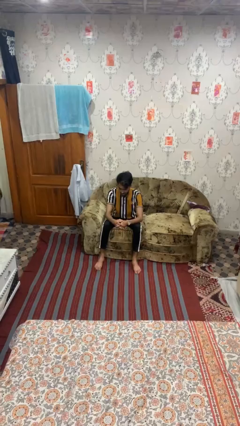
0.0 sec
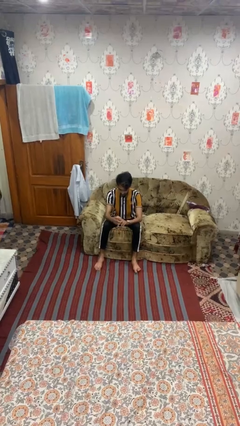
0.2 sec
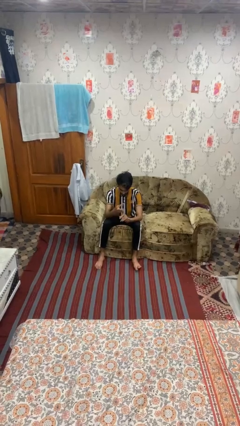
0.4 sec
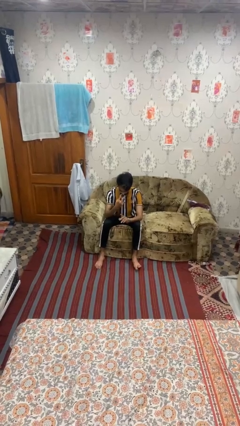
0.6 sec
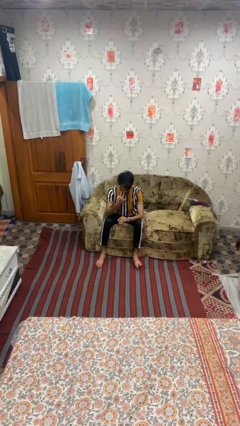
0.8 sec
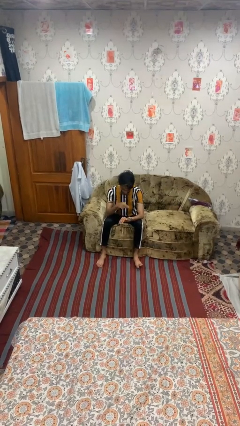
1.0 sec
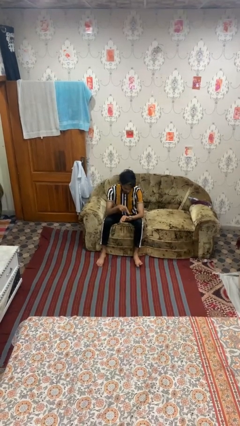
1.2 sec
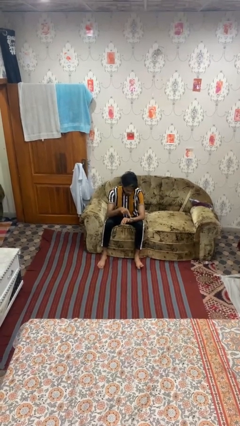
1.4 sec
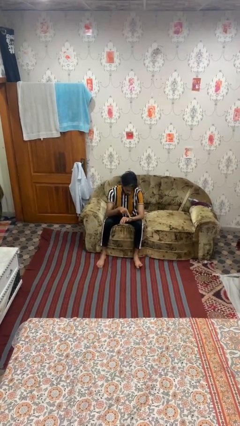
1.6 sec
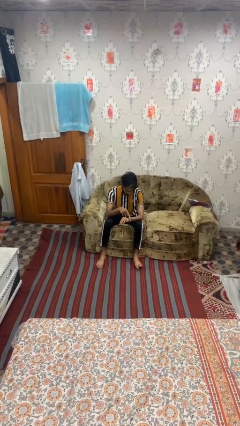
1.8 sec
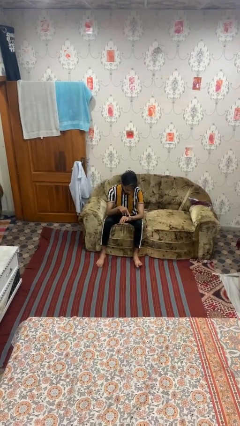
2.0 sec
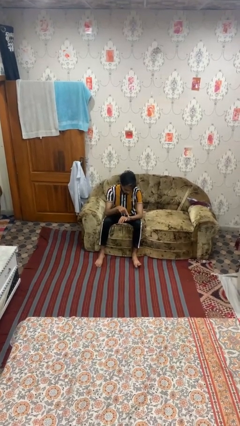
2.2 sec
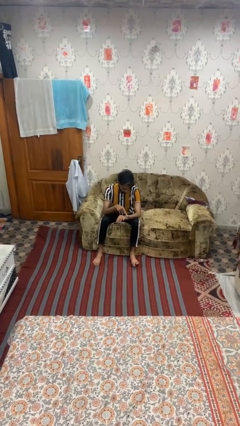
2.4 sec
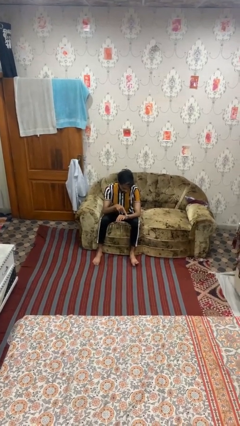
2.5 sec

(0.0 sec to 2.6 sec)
person gestures watch closely

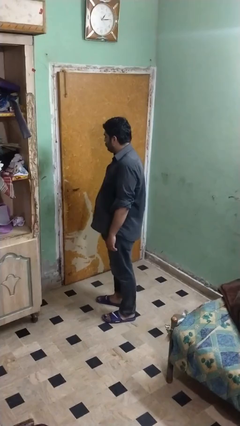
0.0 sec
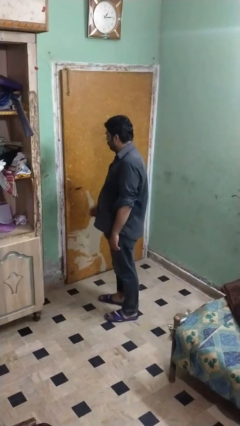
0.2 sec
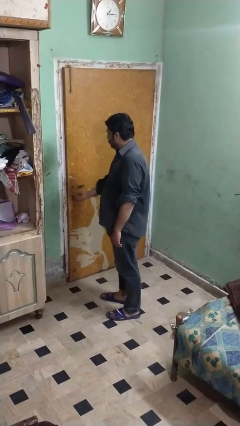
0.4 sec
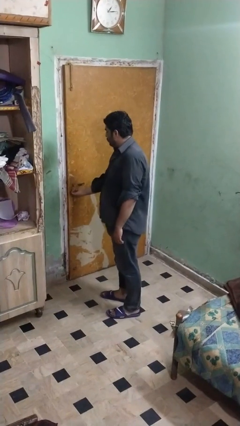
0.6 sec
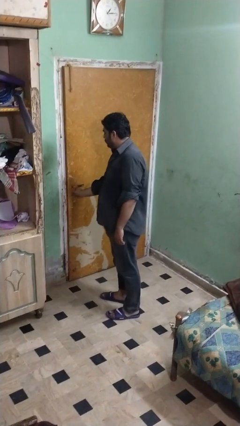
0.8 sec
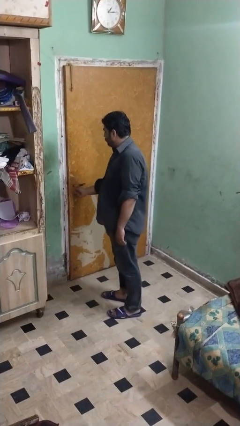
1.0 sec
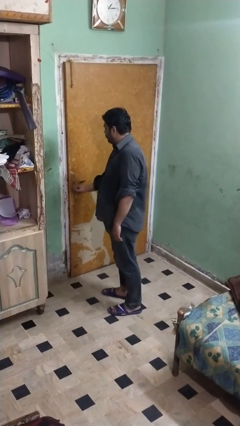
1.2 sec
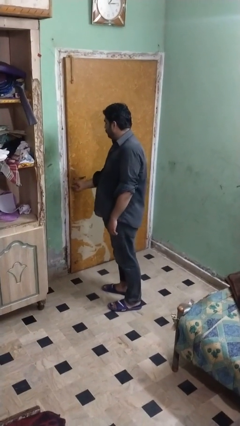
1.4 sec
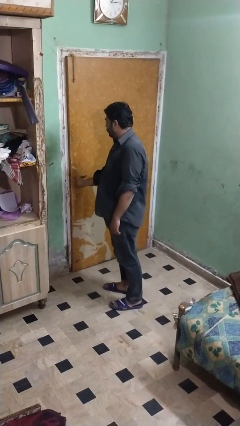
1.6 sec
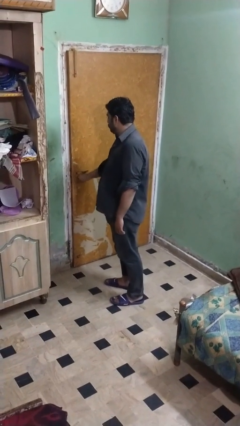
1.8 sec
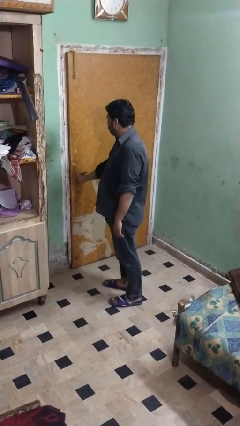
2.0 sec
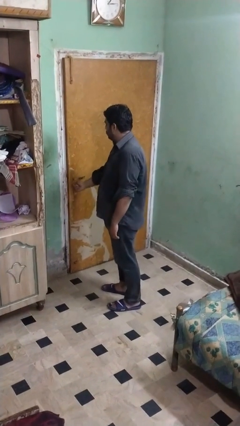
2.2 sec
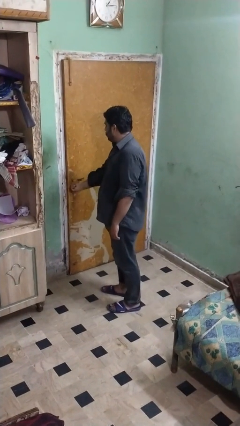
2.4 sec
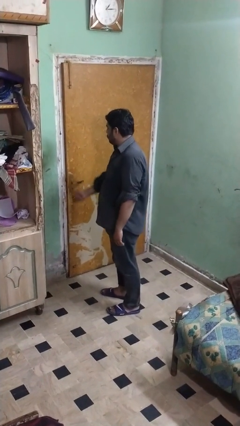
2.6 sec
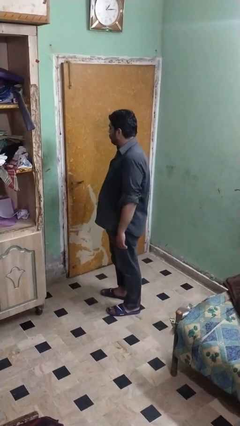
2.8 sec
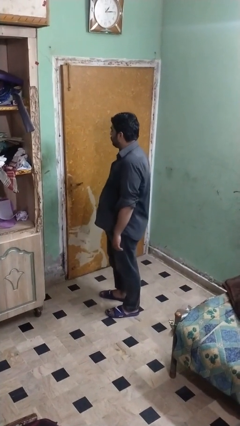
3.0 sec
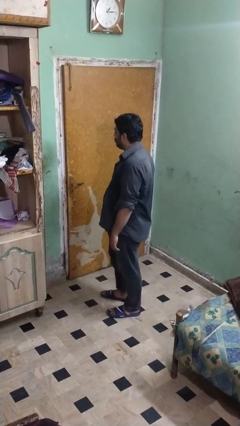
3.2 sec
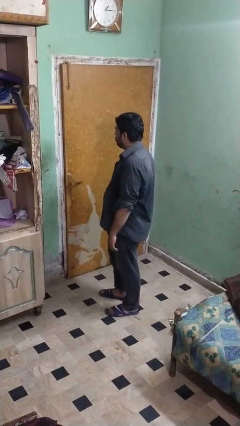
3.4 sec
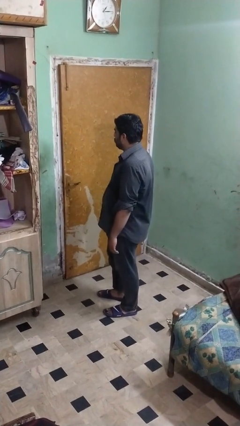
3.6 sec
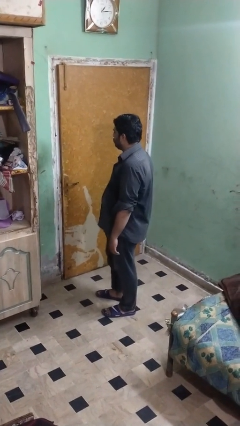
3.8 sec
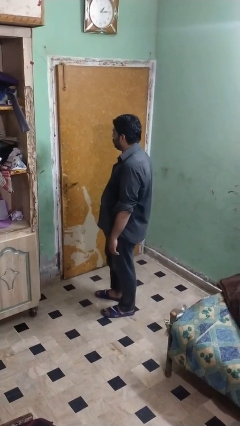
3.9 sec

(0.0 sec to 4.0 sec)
person locks door with keys

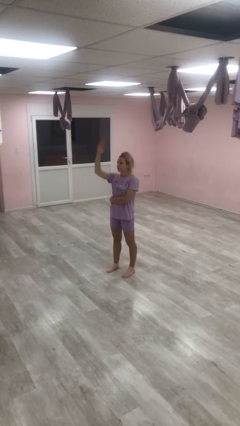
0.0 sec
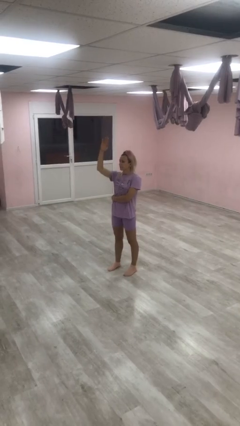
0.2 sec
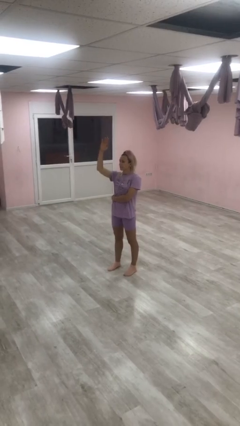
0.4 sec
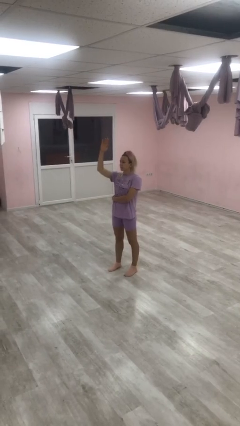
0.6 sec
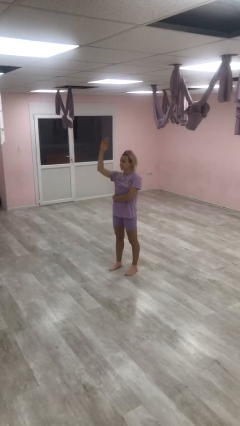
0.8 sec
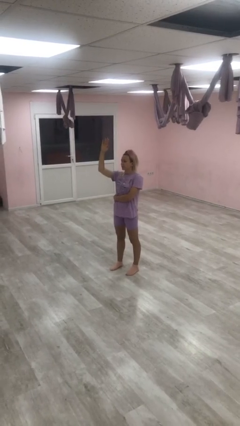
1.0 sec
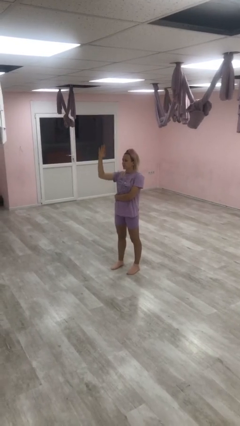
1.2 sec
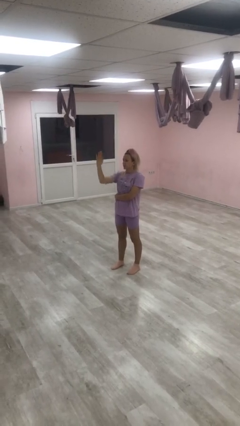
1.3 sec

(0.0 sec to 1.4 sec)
person gestures raise hand

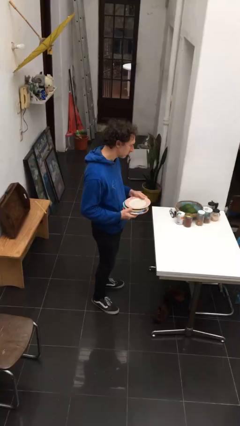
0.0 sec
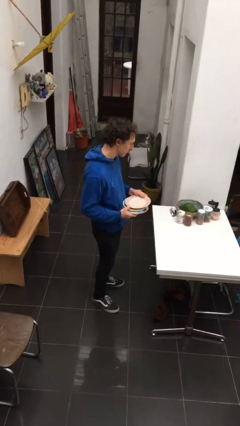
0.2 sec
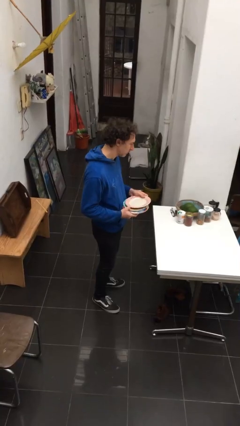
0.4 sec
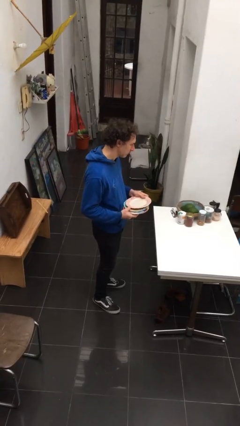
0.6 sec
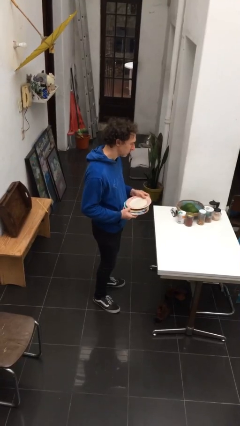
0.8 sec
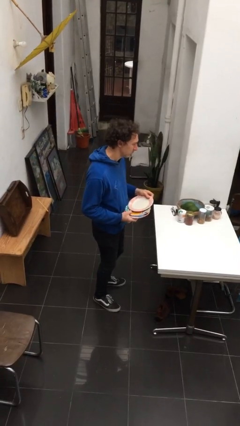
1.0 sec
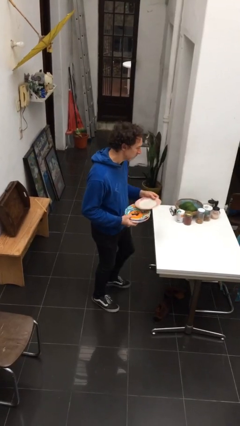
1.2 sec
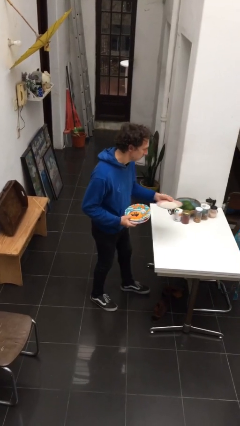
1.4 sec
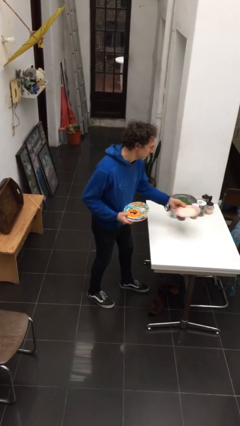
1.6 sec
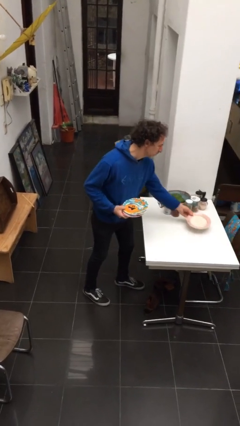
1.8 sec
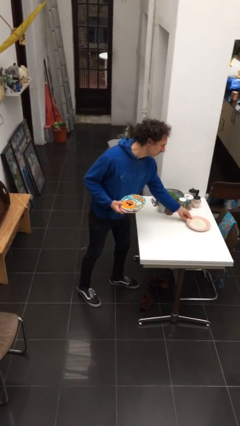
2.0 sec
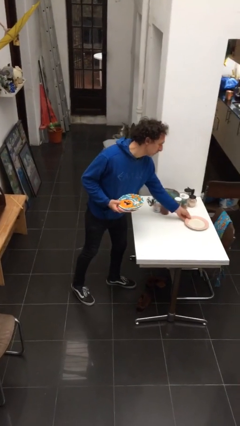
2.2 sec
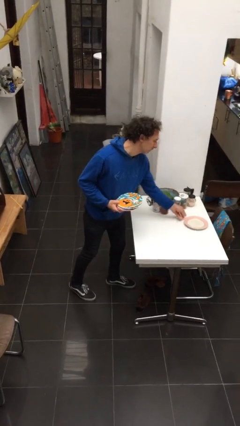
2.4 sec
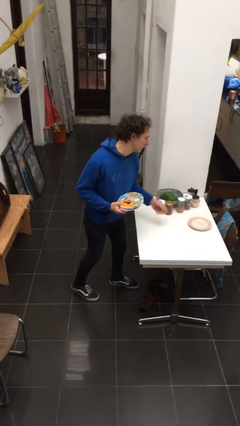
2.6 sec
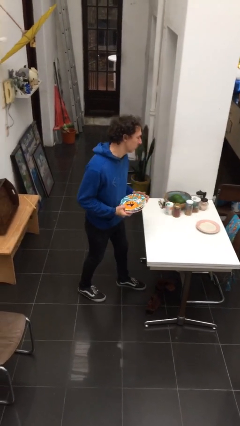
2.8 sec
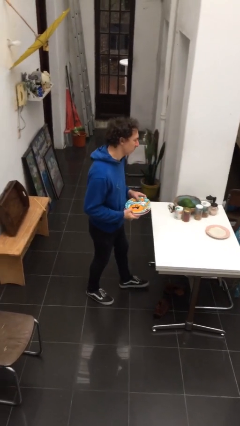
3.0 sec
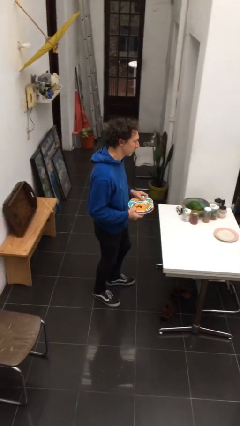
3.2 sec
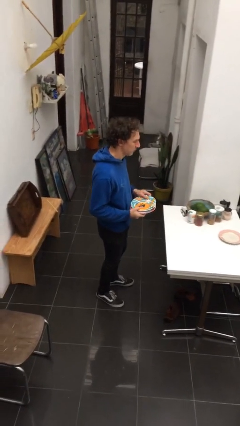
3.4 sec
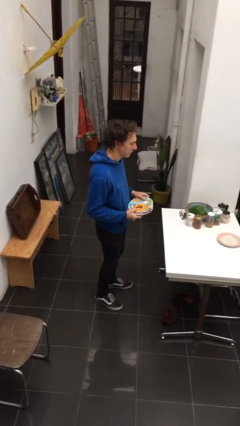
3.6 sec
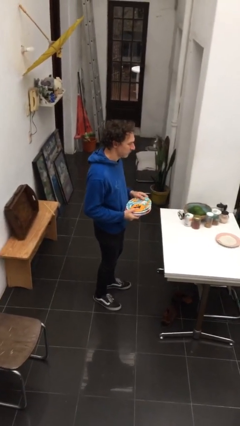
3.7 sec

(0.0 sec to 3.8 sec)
person sets table

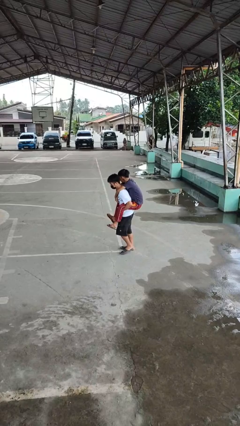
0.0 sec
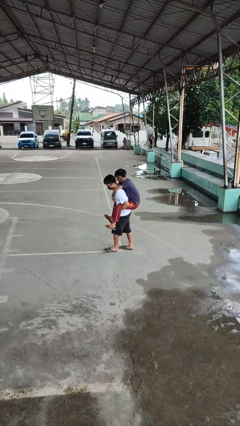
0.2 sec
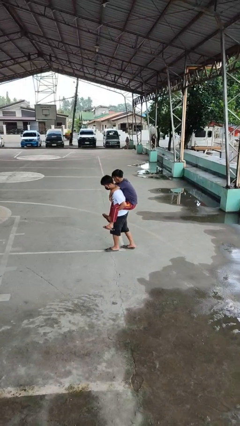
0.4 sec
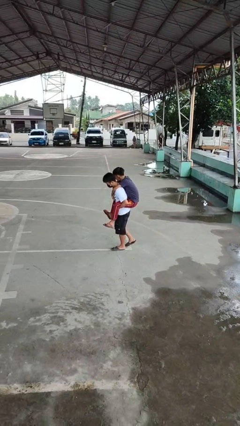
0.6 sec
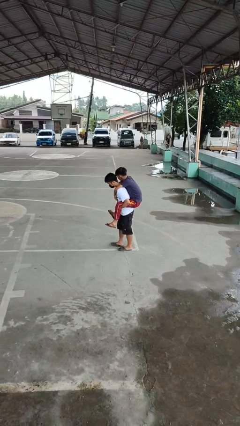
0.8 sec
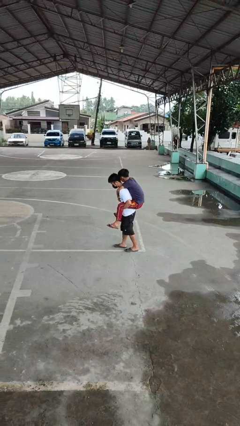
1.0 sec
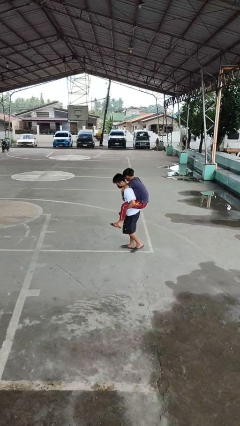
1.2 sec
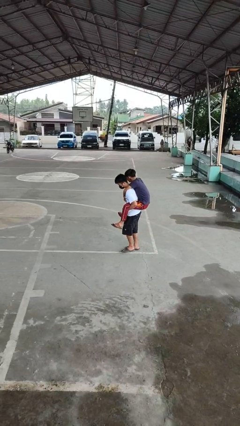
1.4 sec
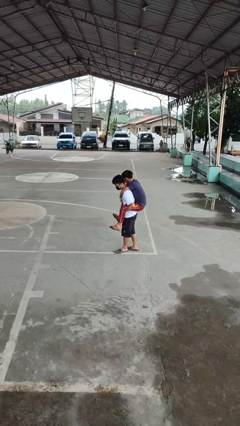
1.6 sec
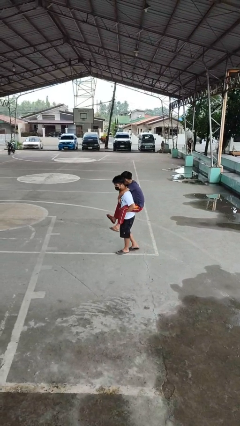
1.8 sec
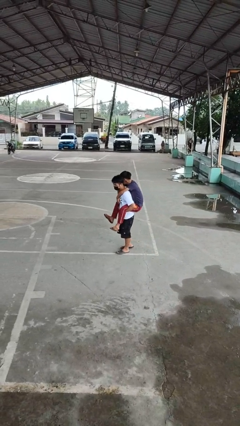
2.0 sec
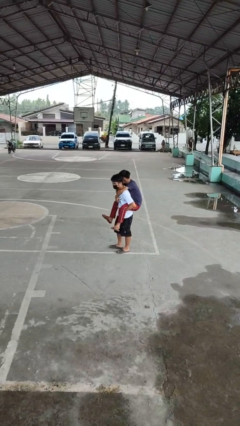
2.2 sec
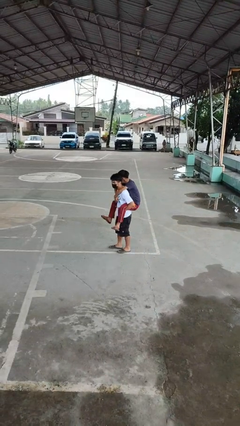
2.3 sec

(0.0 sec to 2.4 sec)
person carries person on back

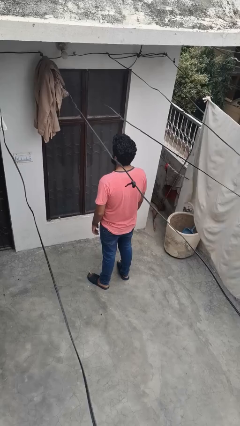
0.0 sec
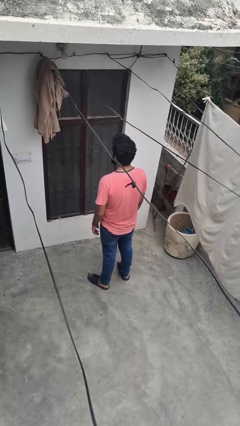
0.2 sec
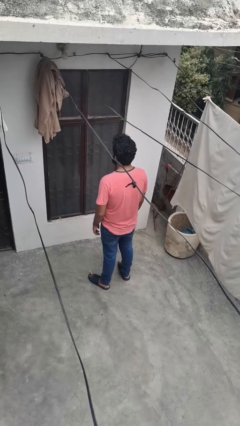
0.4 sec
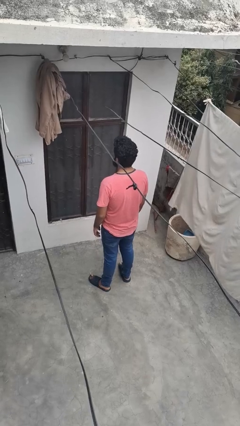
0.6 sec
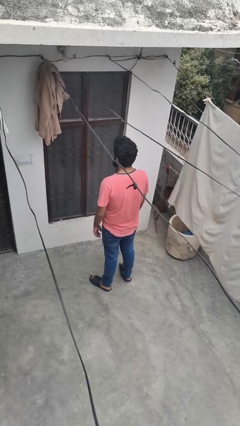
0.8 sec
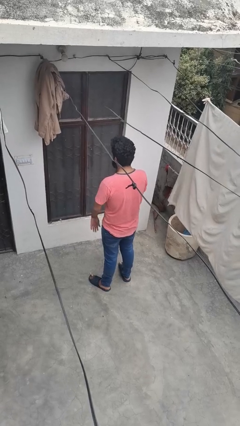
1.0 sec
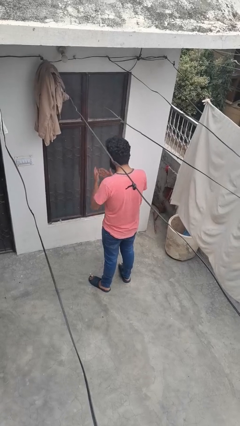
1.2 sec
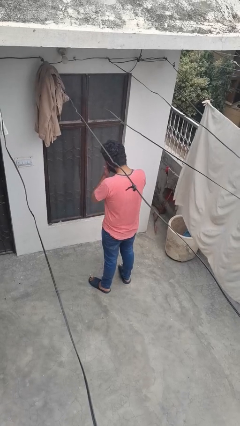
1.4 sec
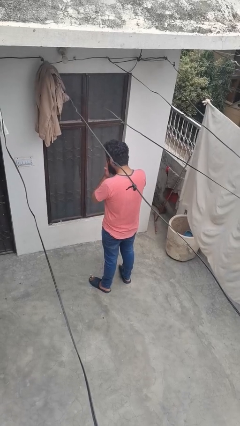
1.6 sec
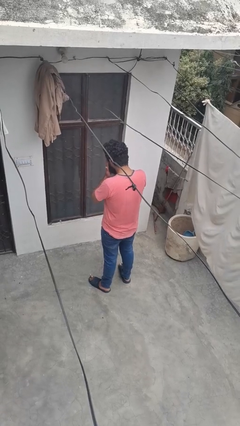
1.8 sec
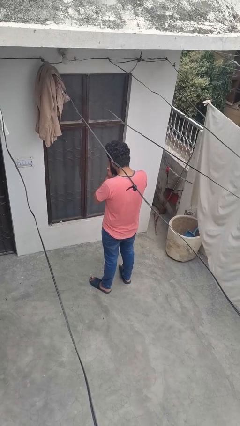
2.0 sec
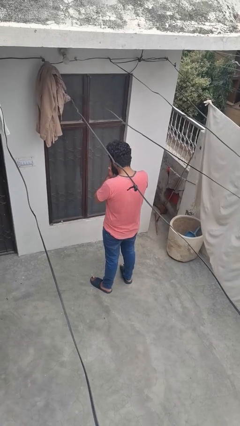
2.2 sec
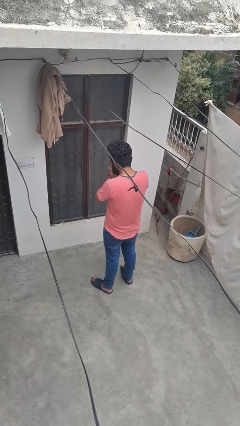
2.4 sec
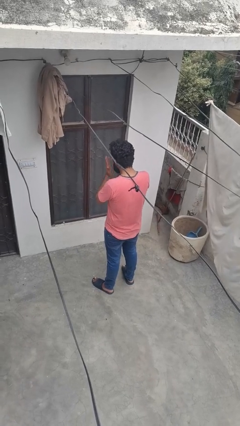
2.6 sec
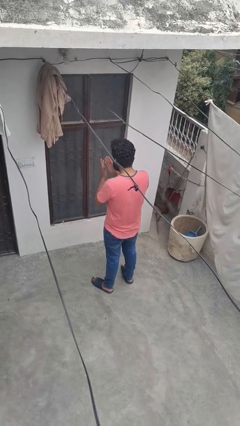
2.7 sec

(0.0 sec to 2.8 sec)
person covers face with hands

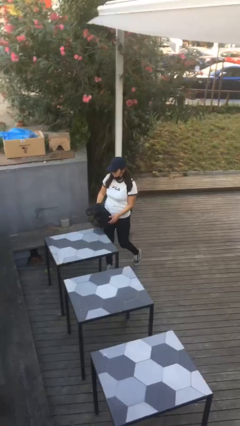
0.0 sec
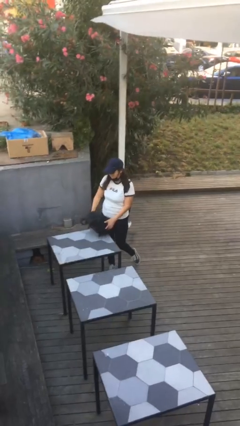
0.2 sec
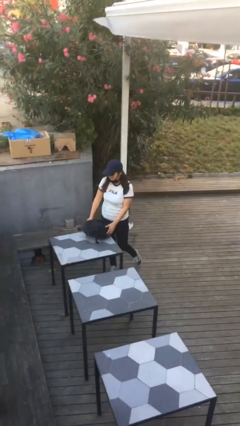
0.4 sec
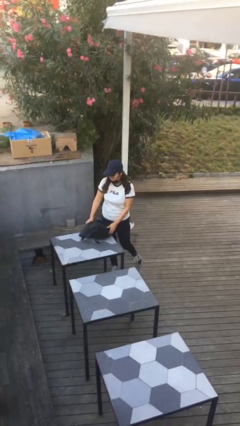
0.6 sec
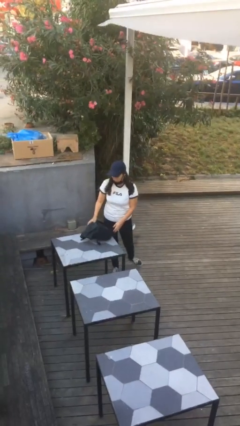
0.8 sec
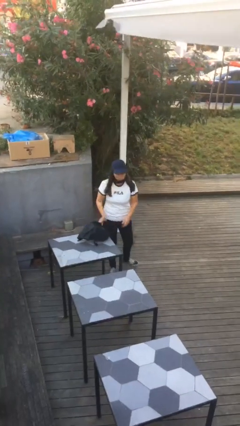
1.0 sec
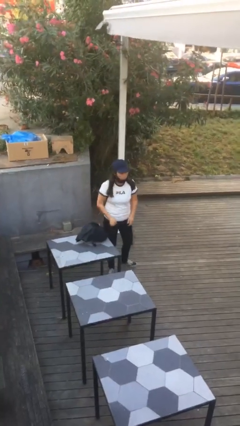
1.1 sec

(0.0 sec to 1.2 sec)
person puts down object on table
